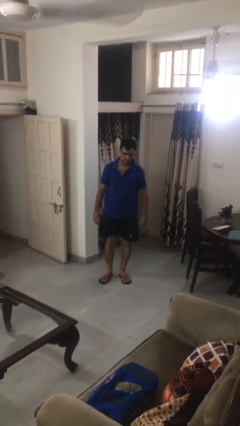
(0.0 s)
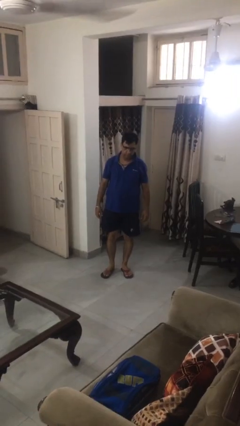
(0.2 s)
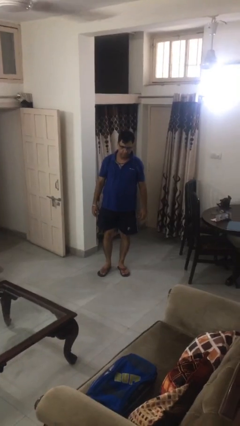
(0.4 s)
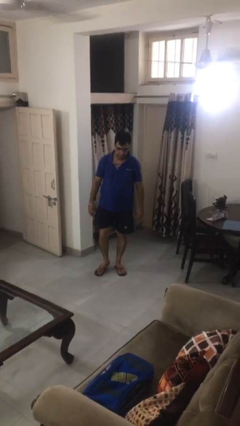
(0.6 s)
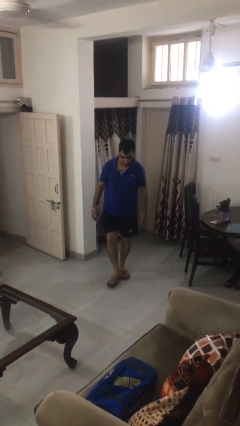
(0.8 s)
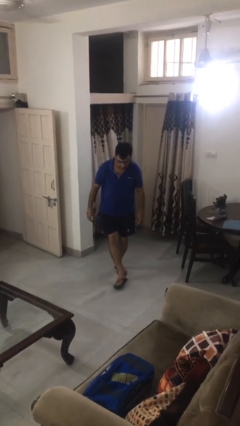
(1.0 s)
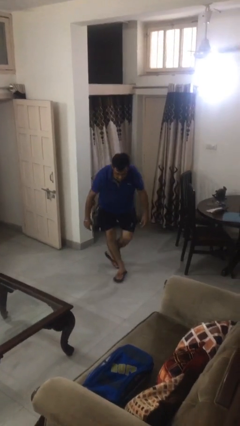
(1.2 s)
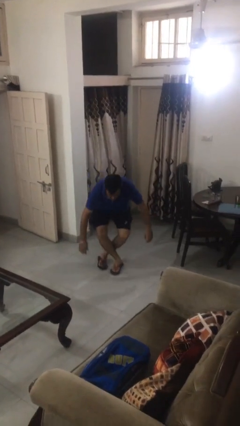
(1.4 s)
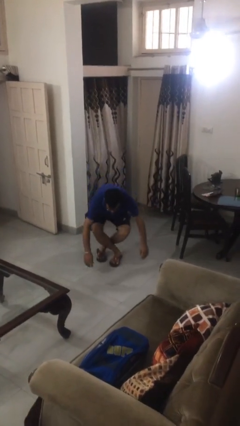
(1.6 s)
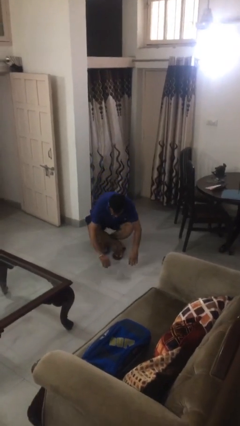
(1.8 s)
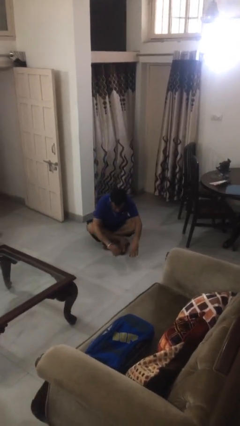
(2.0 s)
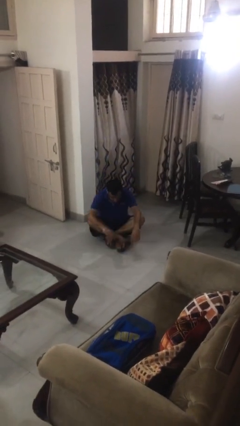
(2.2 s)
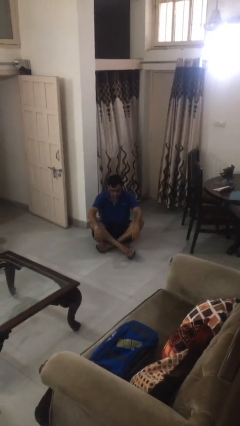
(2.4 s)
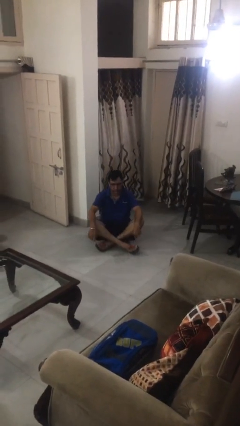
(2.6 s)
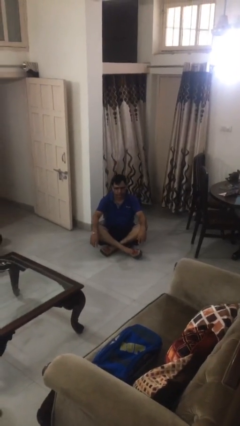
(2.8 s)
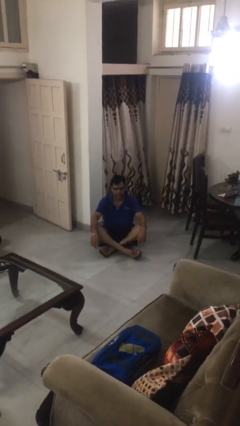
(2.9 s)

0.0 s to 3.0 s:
person sits crisscross

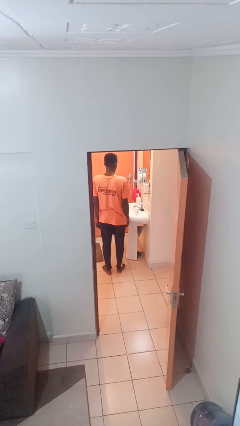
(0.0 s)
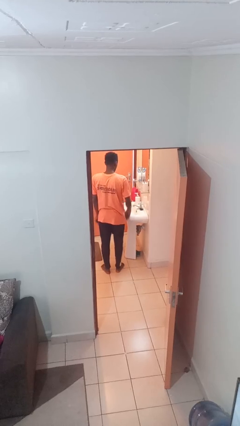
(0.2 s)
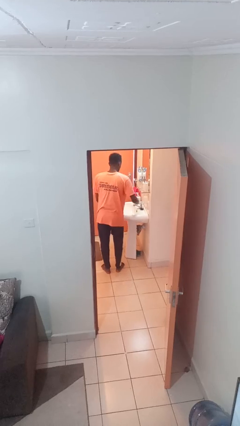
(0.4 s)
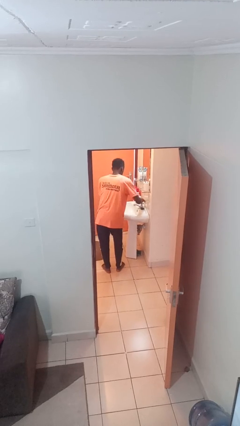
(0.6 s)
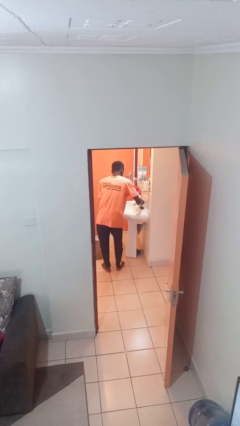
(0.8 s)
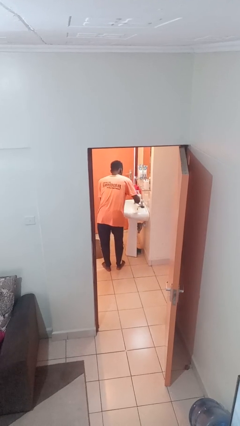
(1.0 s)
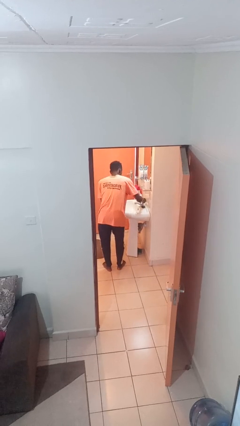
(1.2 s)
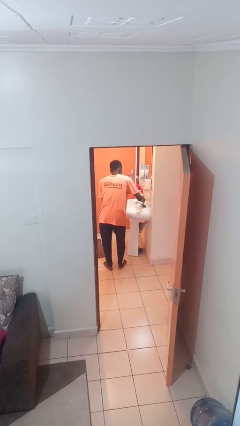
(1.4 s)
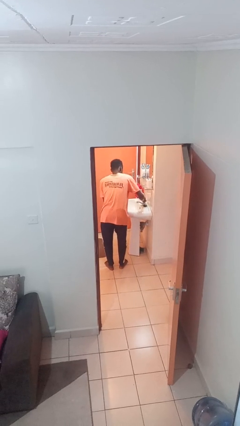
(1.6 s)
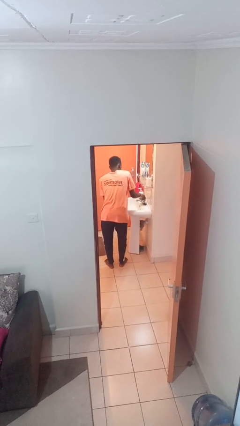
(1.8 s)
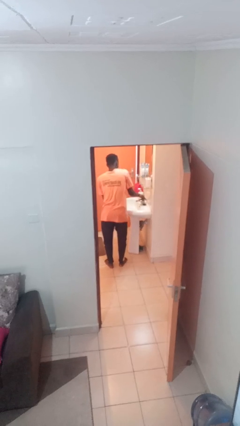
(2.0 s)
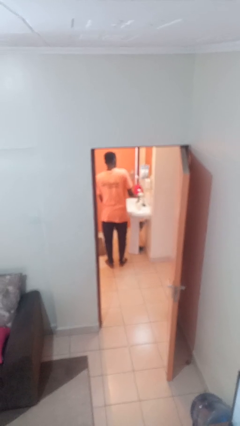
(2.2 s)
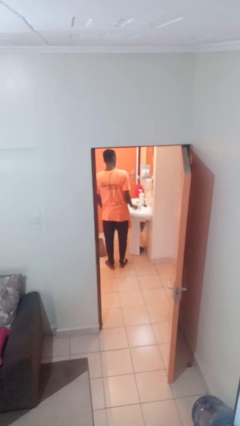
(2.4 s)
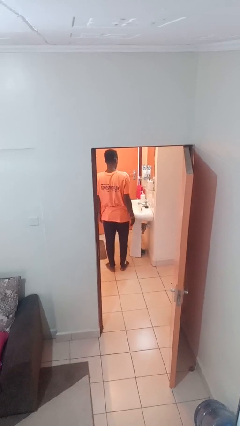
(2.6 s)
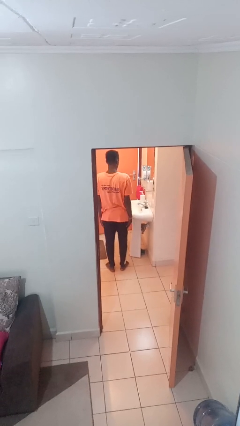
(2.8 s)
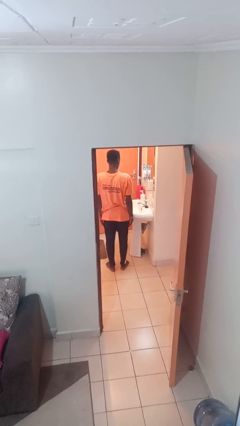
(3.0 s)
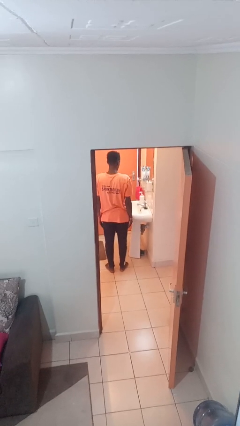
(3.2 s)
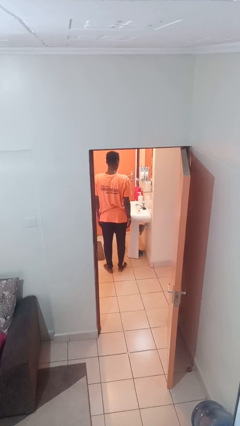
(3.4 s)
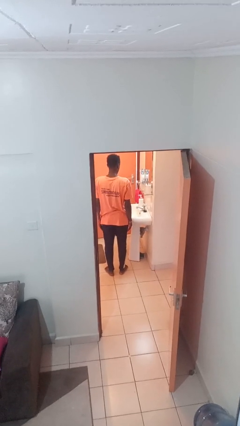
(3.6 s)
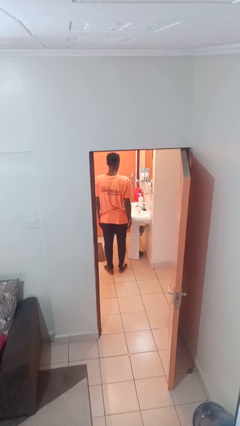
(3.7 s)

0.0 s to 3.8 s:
person turns off faucet

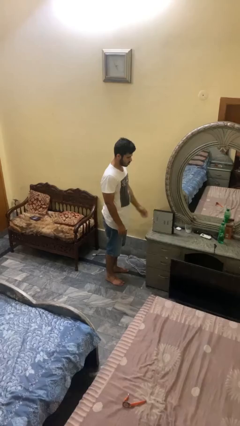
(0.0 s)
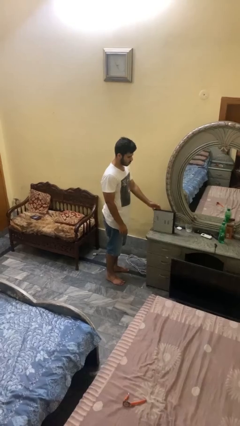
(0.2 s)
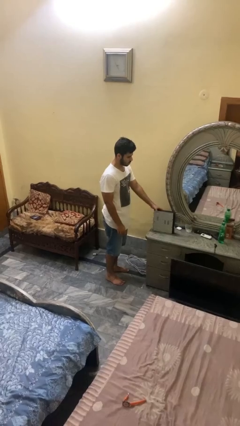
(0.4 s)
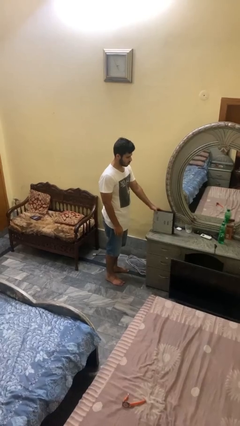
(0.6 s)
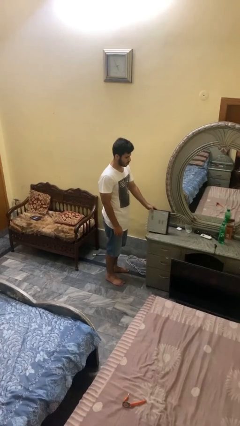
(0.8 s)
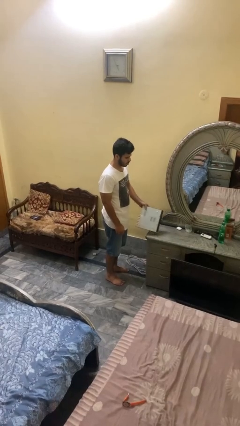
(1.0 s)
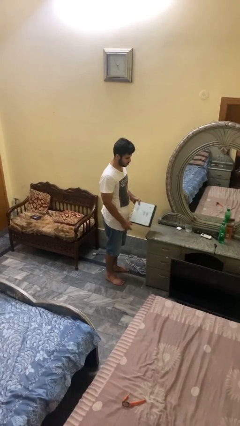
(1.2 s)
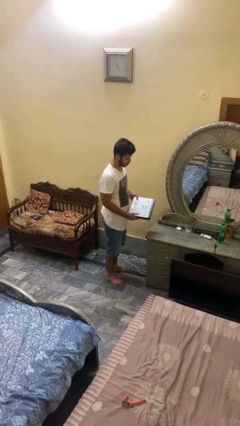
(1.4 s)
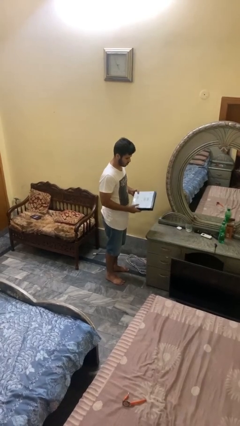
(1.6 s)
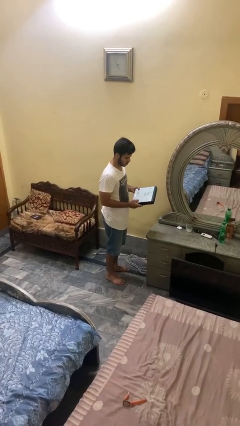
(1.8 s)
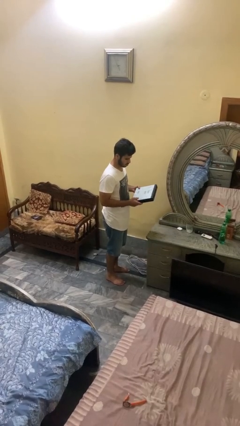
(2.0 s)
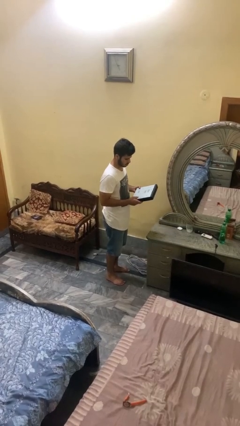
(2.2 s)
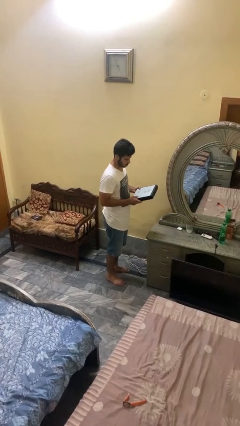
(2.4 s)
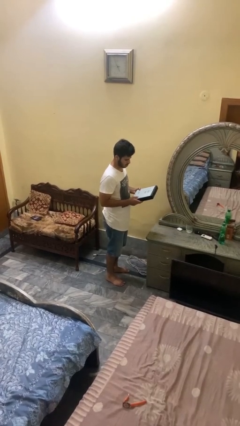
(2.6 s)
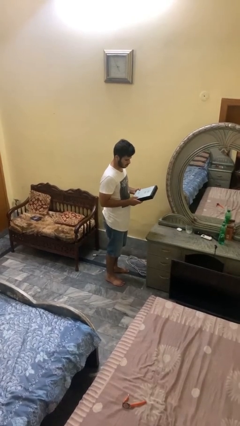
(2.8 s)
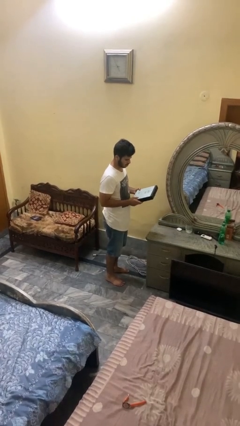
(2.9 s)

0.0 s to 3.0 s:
person picks up object from countertop

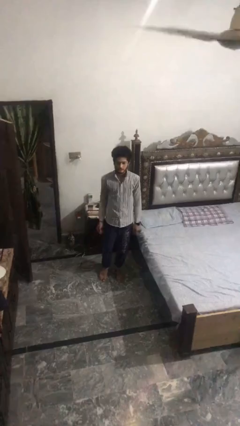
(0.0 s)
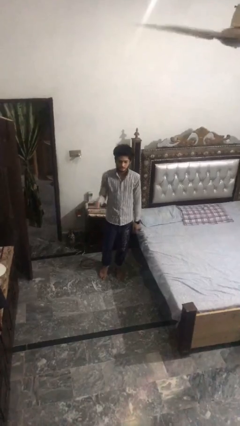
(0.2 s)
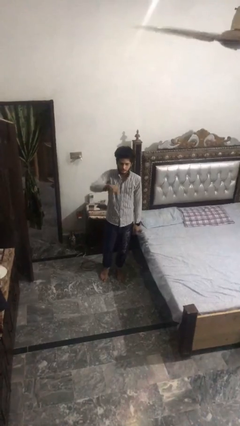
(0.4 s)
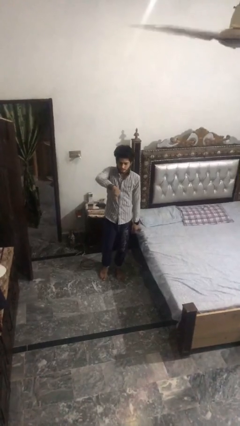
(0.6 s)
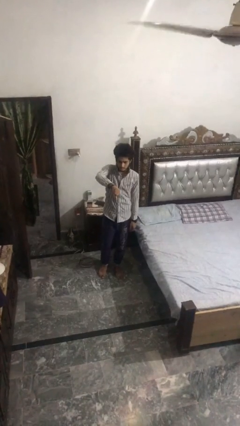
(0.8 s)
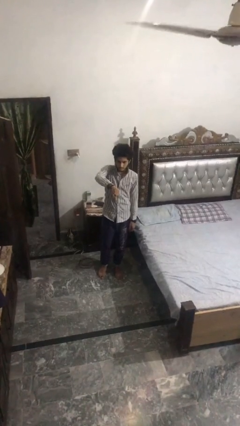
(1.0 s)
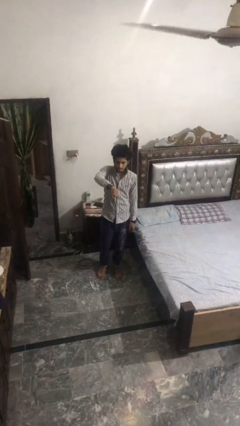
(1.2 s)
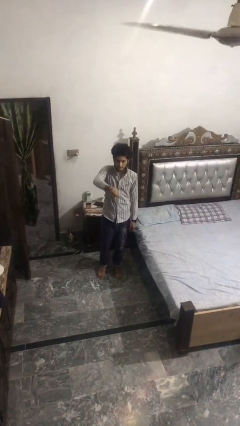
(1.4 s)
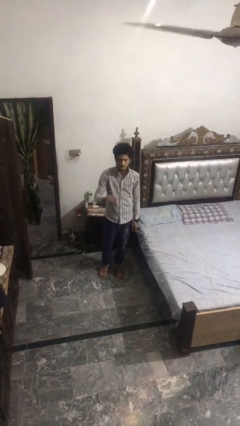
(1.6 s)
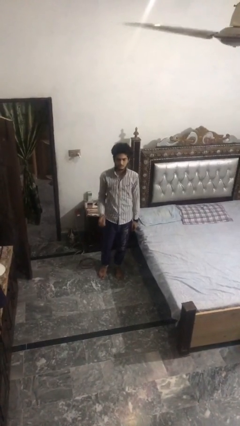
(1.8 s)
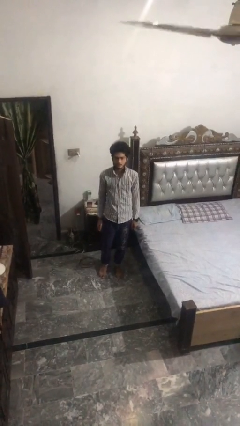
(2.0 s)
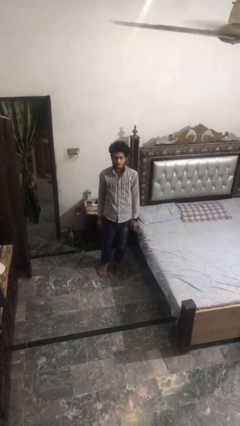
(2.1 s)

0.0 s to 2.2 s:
person gestures thumbs down

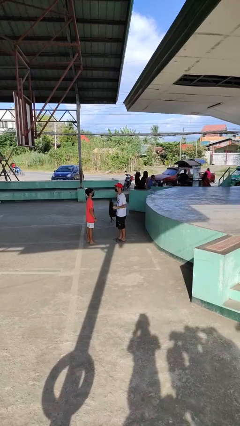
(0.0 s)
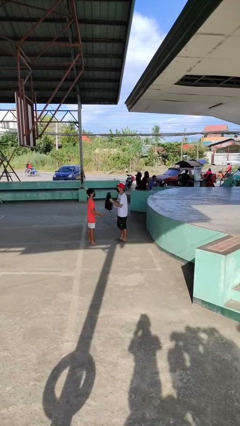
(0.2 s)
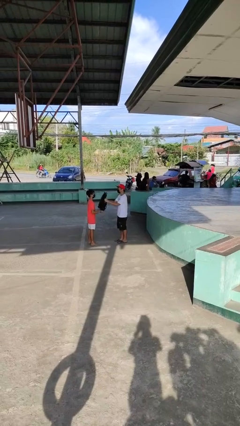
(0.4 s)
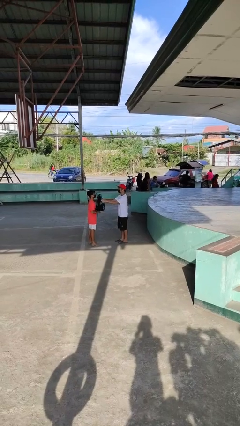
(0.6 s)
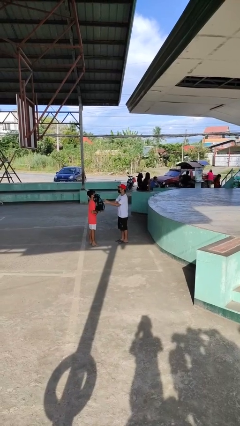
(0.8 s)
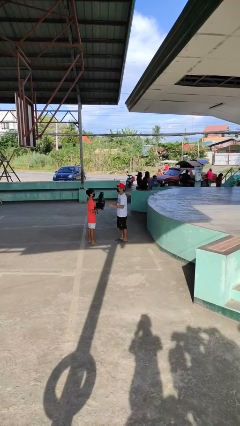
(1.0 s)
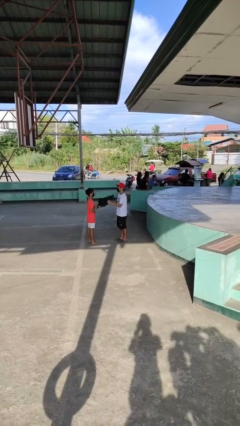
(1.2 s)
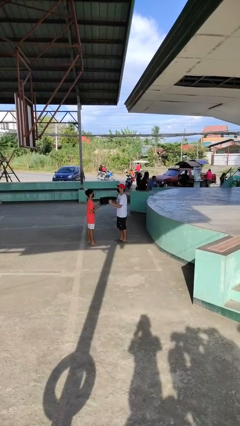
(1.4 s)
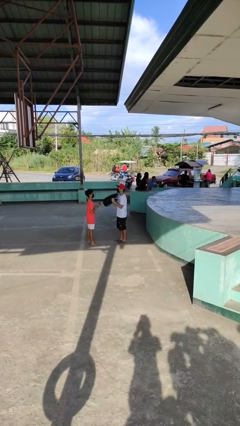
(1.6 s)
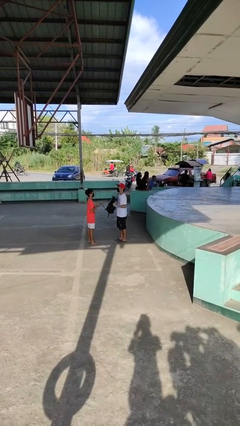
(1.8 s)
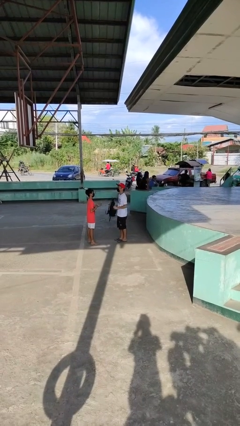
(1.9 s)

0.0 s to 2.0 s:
person transfers object to person

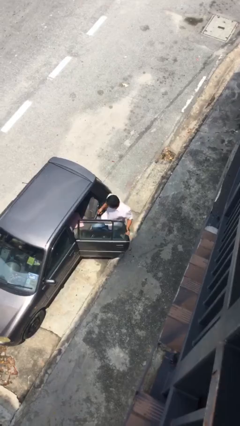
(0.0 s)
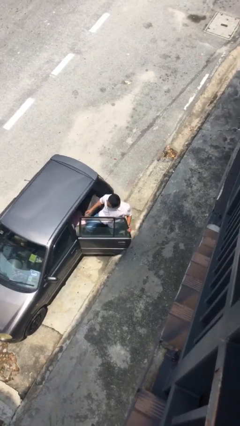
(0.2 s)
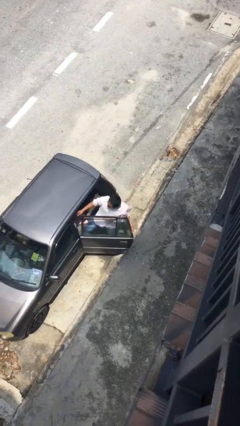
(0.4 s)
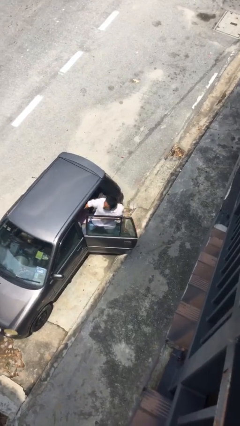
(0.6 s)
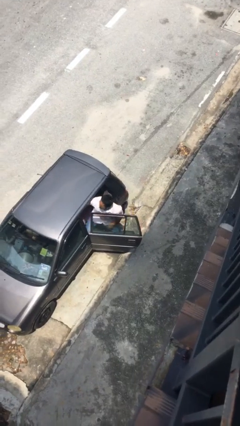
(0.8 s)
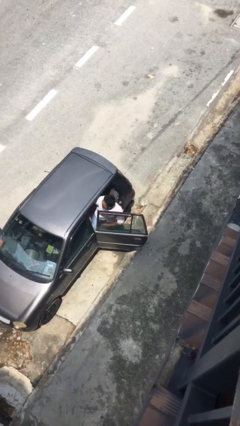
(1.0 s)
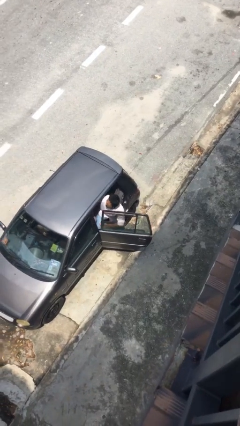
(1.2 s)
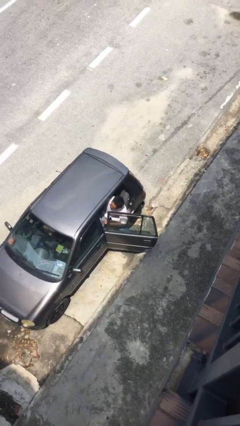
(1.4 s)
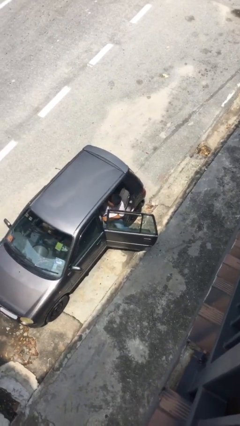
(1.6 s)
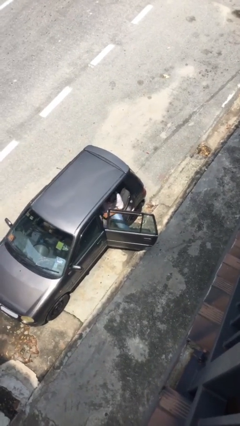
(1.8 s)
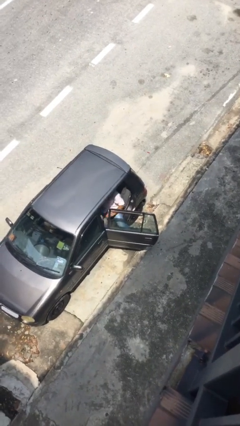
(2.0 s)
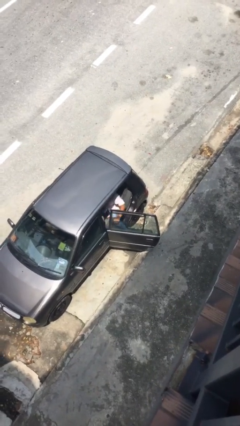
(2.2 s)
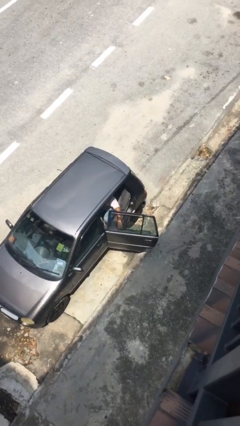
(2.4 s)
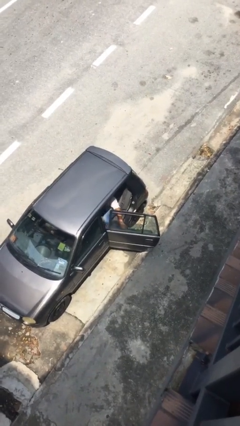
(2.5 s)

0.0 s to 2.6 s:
person enters car

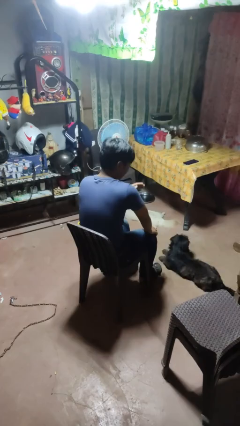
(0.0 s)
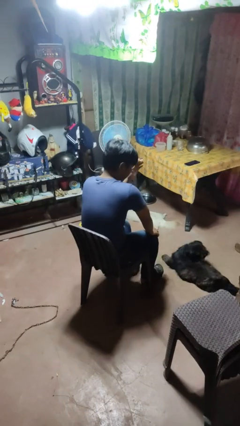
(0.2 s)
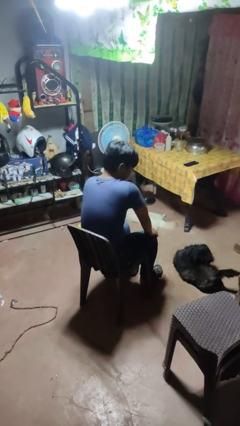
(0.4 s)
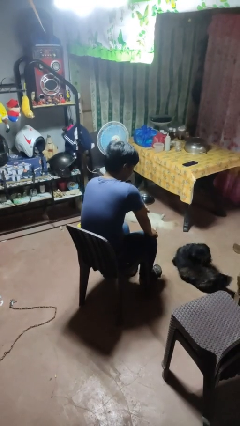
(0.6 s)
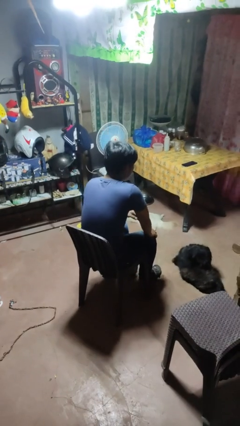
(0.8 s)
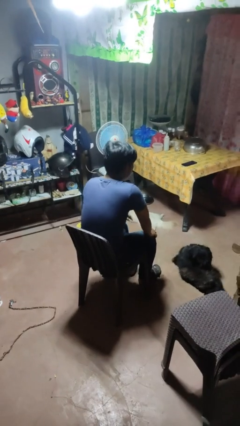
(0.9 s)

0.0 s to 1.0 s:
person swats bug
